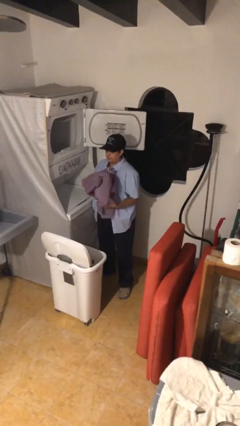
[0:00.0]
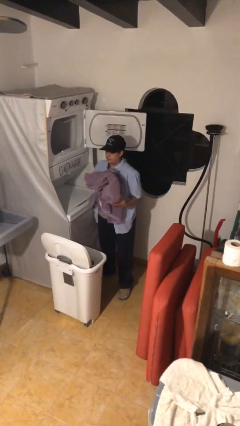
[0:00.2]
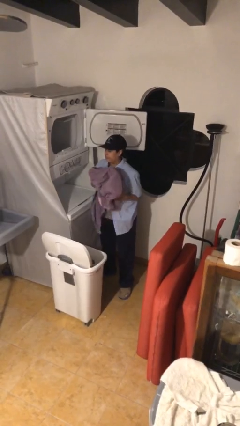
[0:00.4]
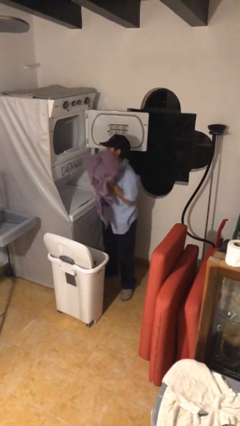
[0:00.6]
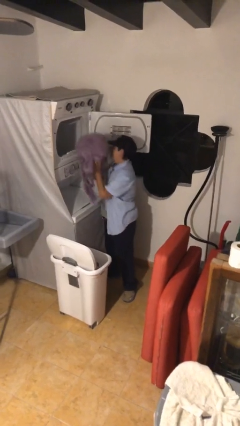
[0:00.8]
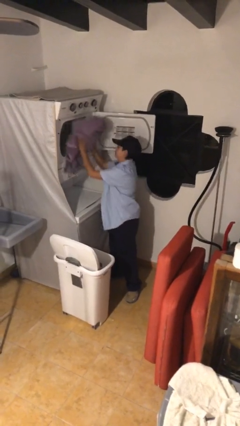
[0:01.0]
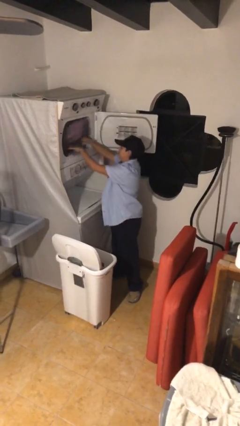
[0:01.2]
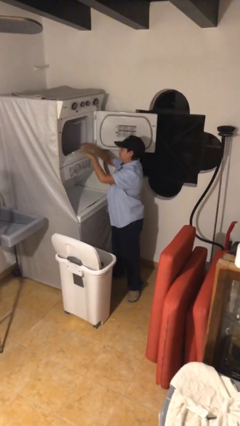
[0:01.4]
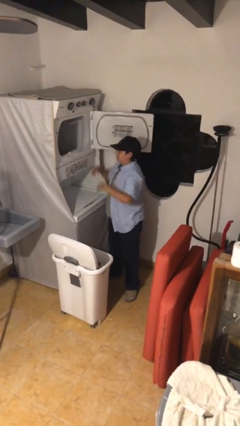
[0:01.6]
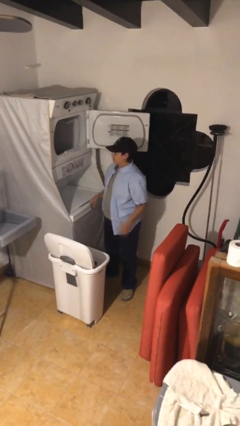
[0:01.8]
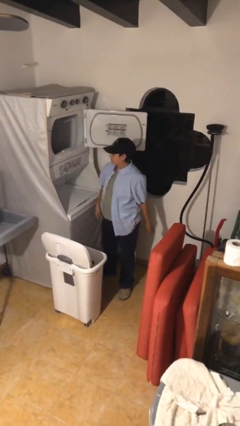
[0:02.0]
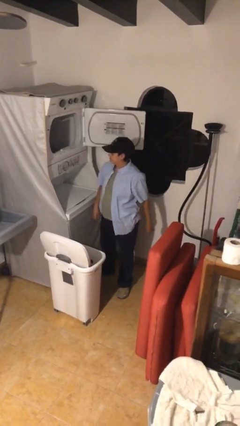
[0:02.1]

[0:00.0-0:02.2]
person loads dryer

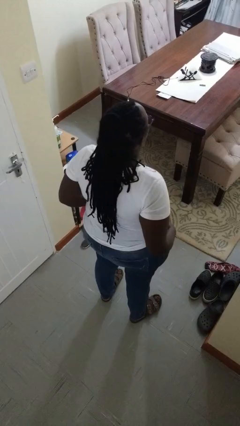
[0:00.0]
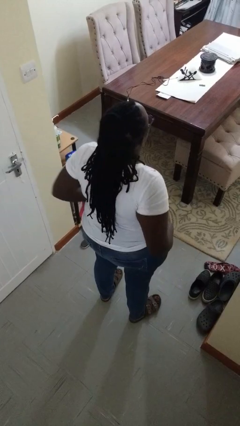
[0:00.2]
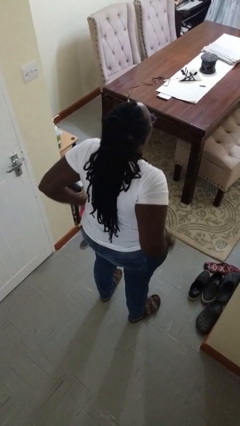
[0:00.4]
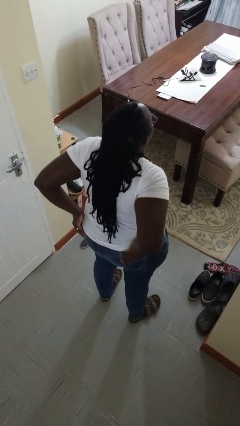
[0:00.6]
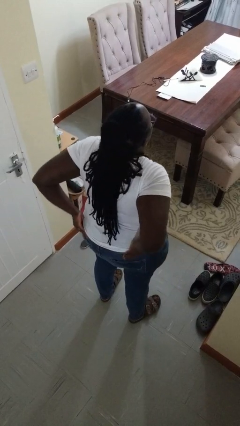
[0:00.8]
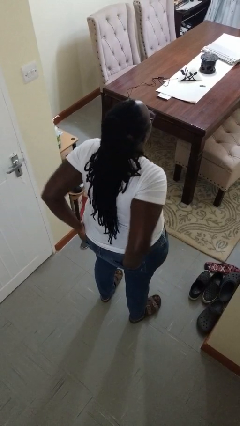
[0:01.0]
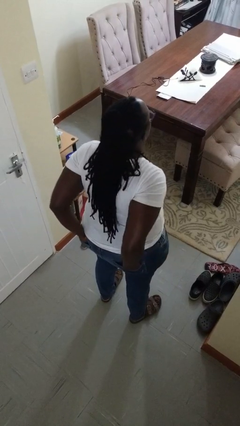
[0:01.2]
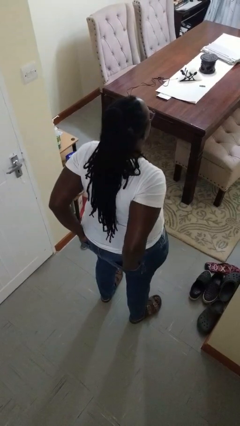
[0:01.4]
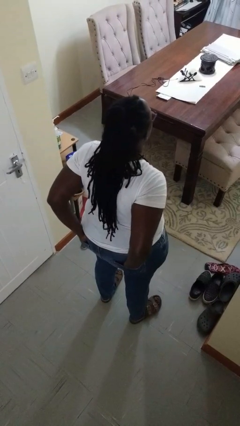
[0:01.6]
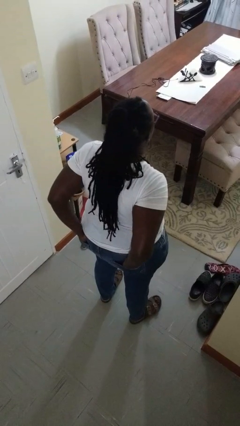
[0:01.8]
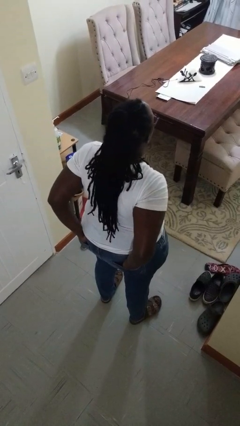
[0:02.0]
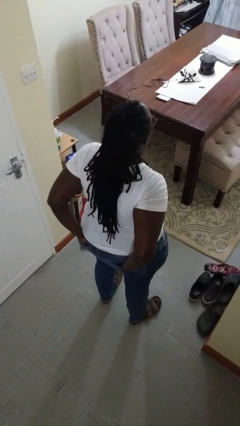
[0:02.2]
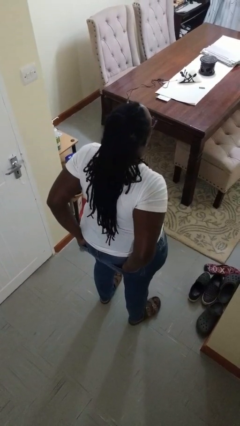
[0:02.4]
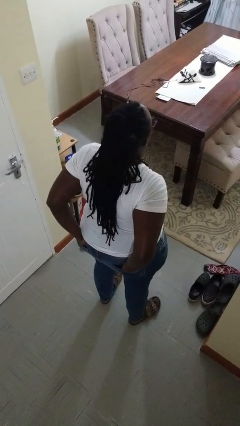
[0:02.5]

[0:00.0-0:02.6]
person puts hands in back pockets

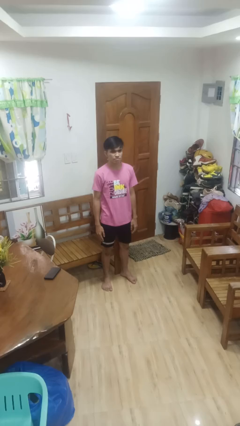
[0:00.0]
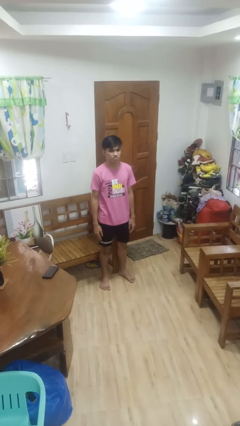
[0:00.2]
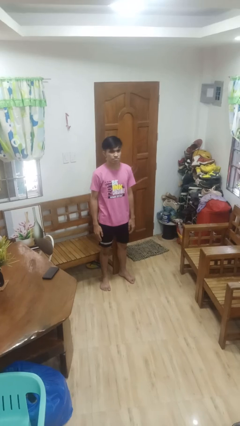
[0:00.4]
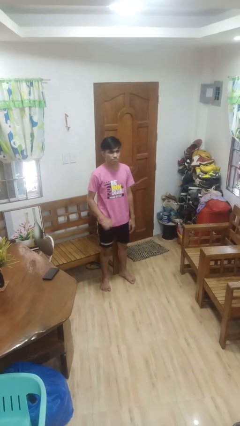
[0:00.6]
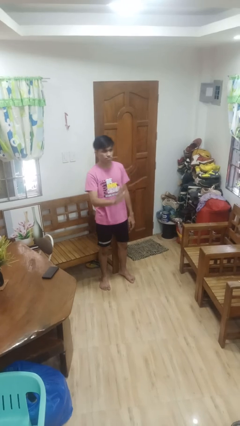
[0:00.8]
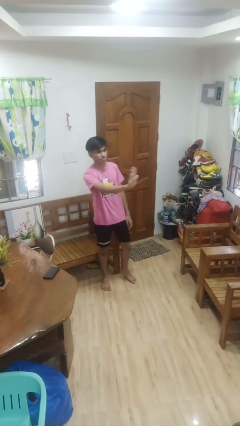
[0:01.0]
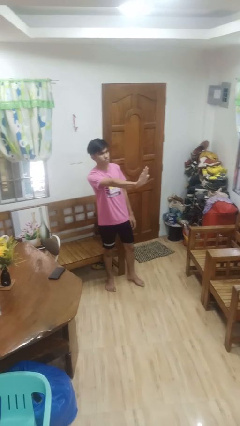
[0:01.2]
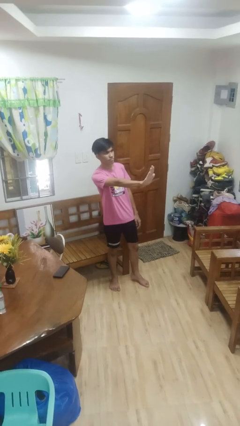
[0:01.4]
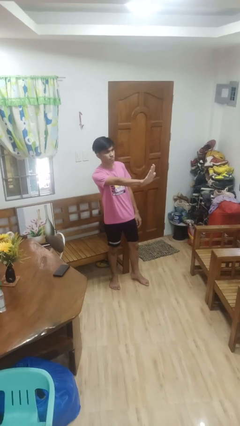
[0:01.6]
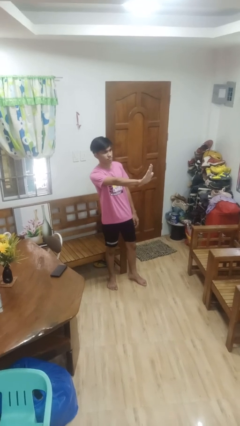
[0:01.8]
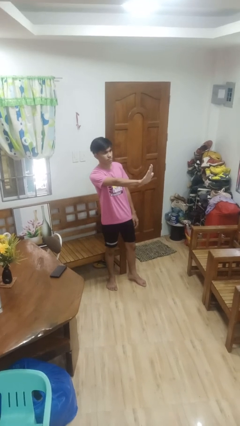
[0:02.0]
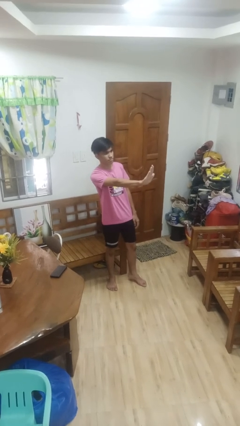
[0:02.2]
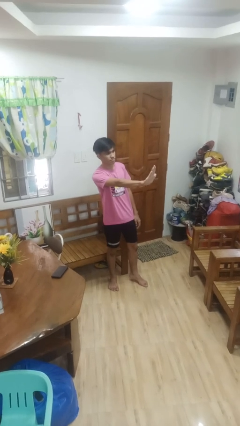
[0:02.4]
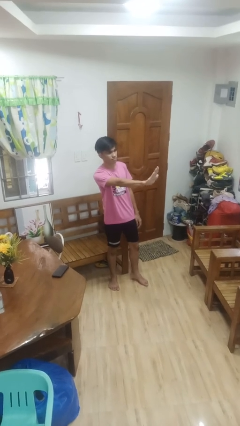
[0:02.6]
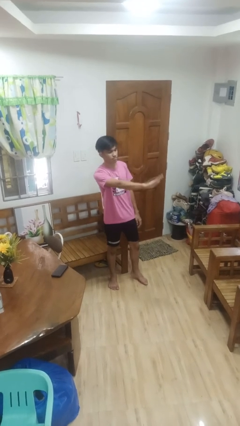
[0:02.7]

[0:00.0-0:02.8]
person gestures stop

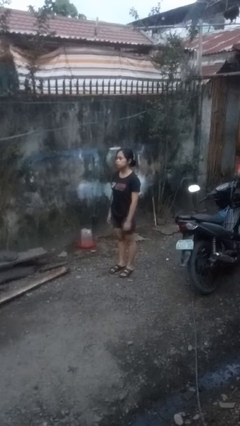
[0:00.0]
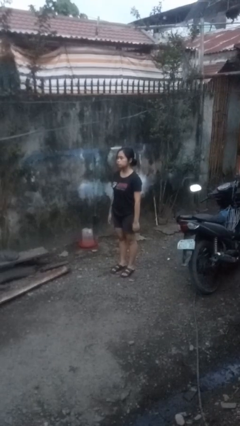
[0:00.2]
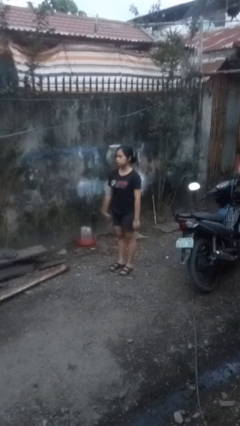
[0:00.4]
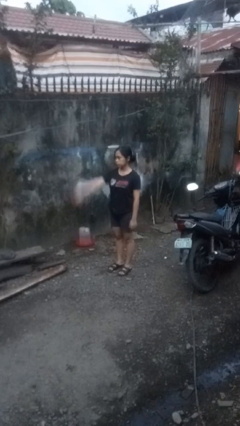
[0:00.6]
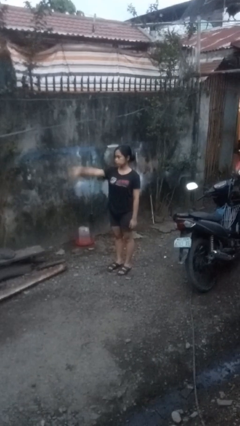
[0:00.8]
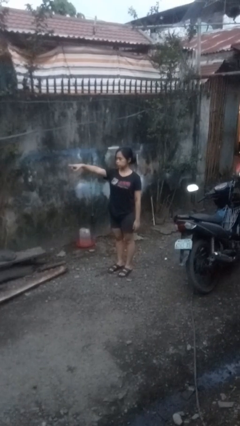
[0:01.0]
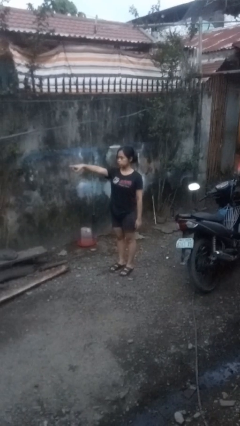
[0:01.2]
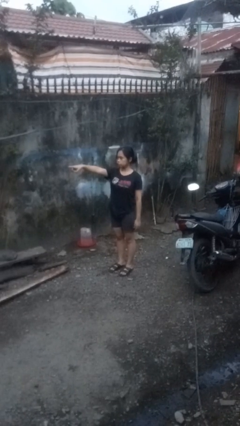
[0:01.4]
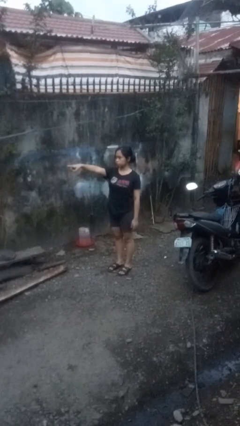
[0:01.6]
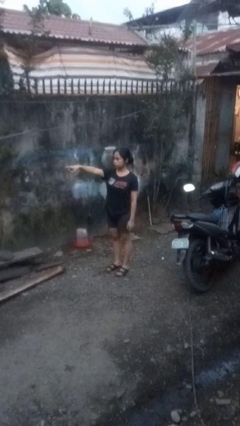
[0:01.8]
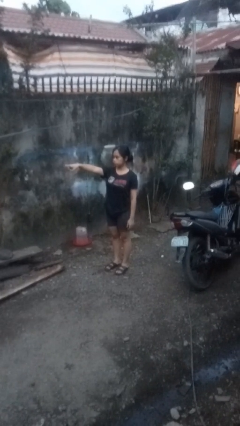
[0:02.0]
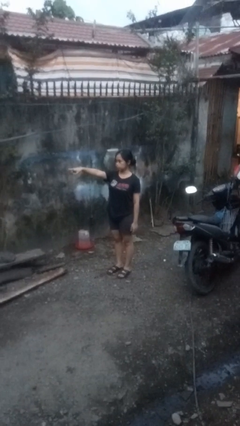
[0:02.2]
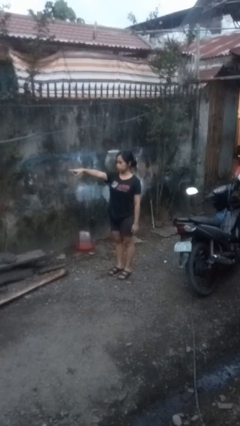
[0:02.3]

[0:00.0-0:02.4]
person points at person

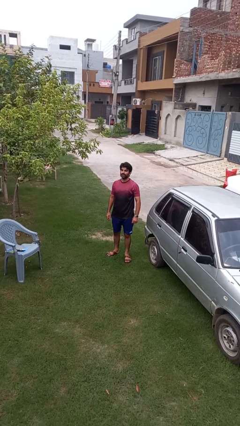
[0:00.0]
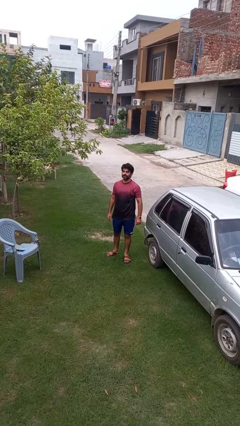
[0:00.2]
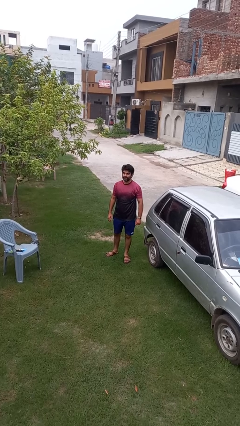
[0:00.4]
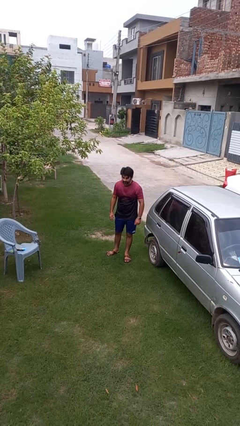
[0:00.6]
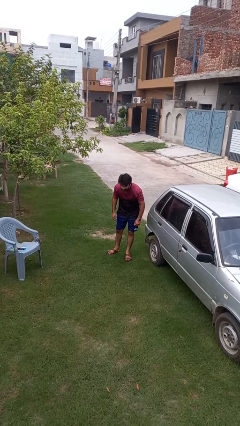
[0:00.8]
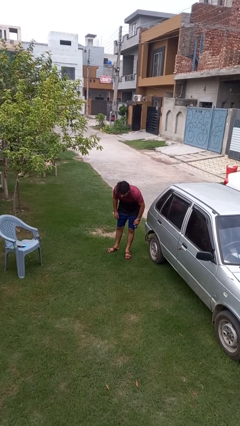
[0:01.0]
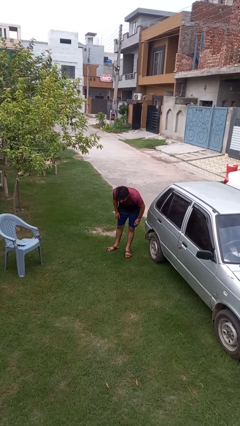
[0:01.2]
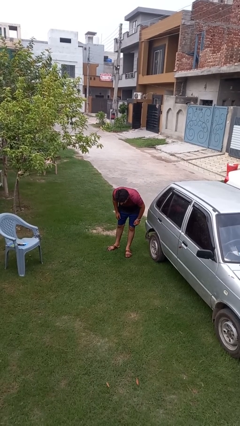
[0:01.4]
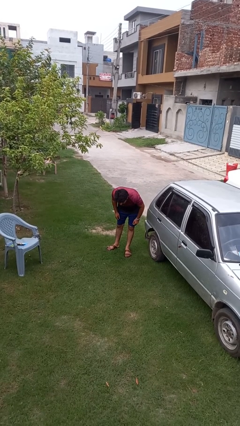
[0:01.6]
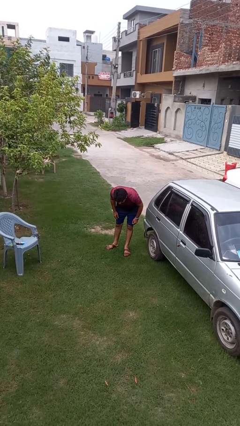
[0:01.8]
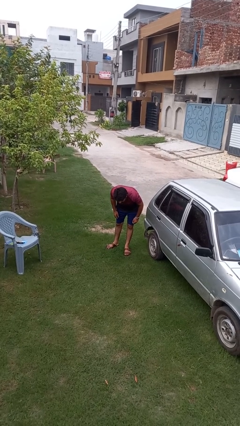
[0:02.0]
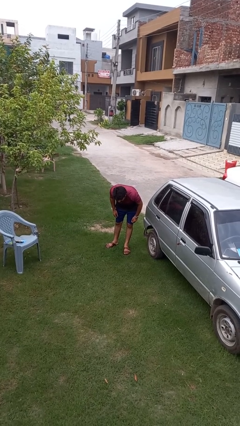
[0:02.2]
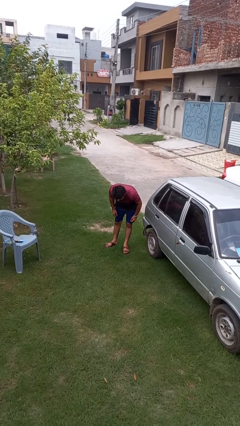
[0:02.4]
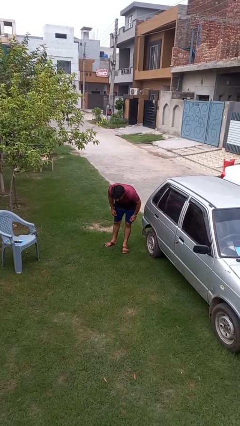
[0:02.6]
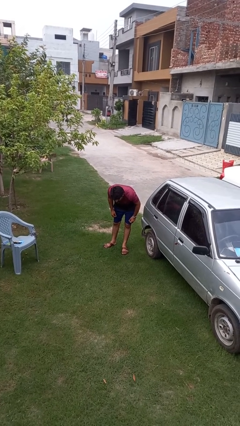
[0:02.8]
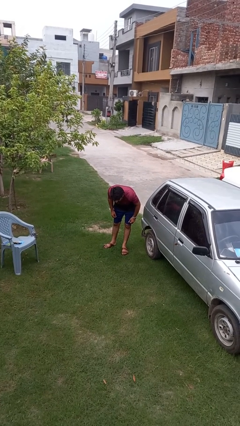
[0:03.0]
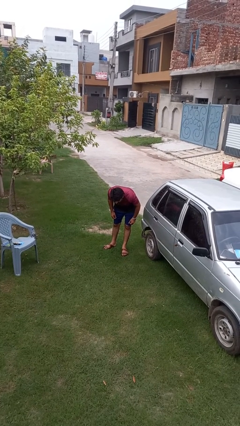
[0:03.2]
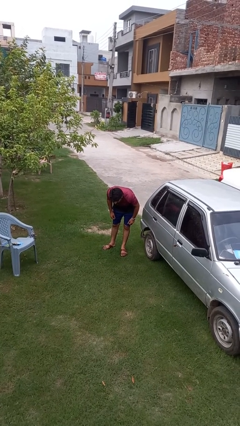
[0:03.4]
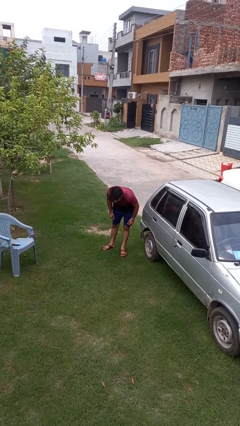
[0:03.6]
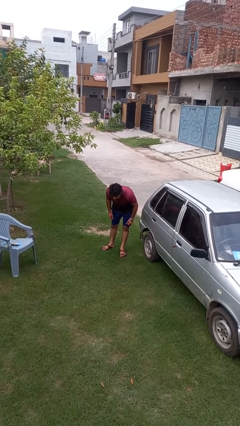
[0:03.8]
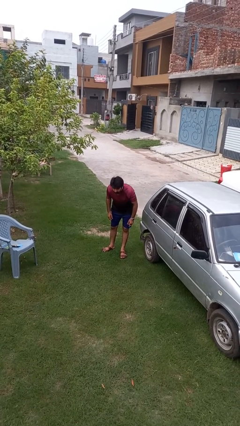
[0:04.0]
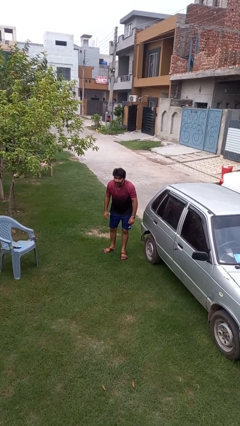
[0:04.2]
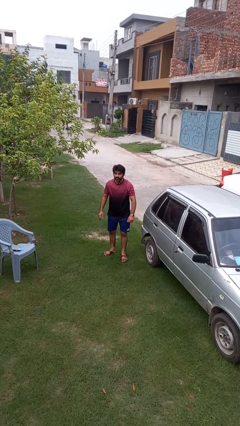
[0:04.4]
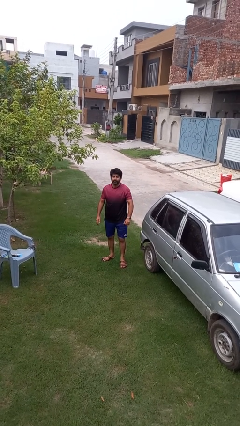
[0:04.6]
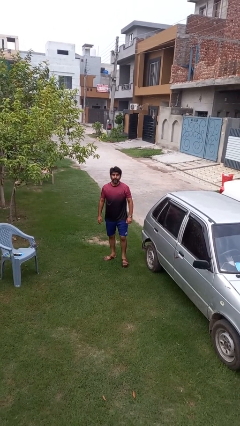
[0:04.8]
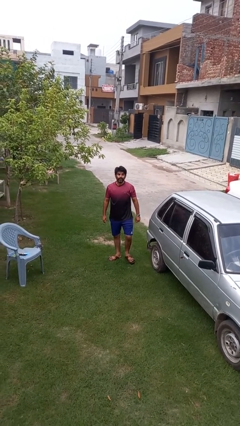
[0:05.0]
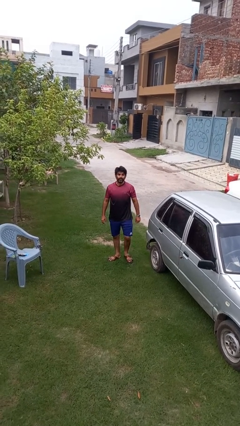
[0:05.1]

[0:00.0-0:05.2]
person bows

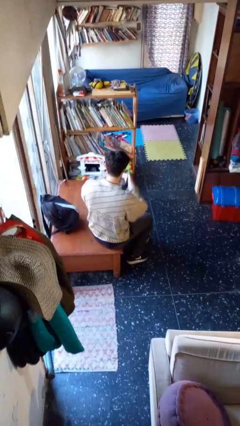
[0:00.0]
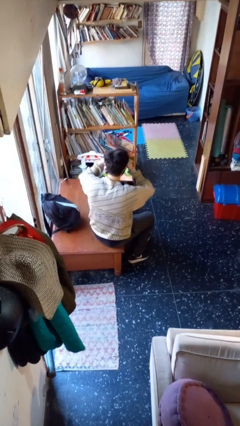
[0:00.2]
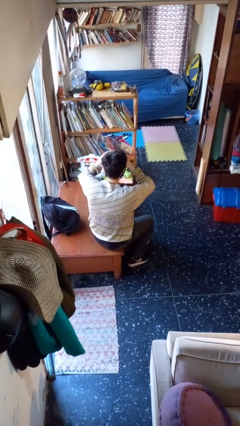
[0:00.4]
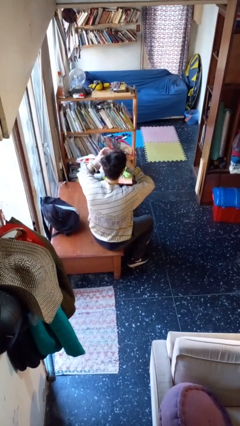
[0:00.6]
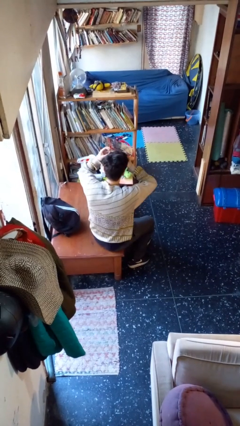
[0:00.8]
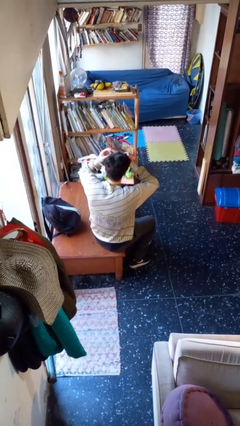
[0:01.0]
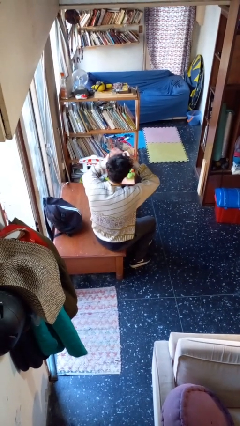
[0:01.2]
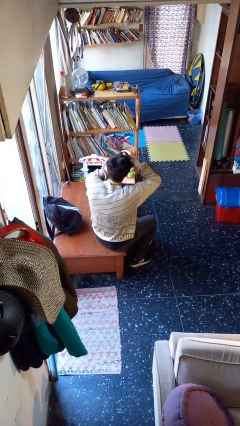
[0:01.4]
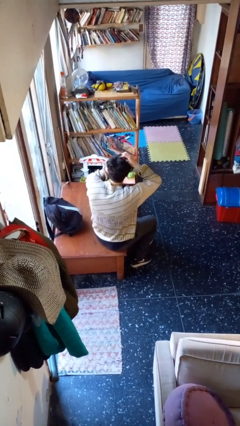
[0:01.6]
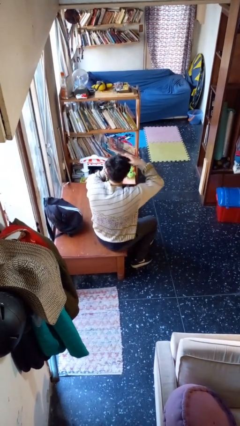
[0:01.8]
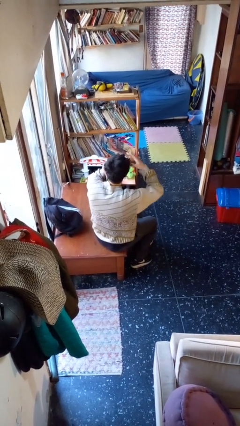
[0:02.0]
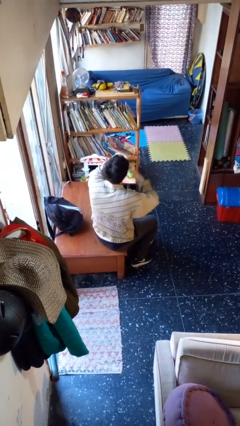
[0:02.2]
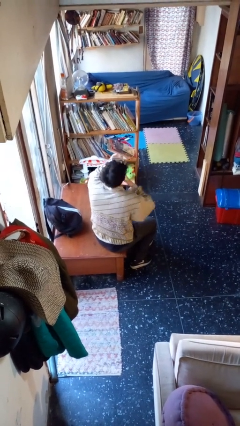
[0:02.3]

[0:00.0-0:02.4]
person puts on facemask
